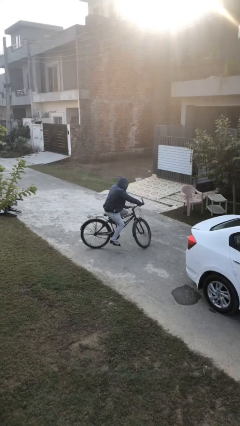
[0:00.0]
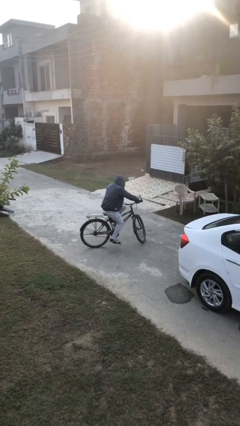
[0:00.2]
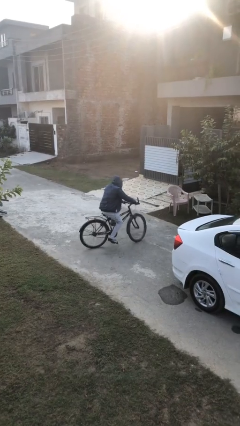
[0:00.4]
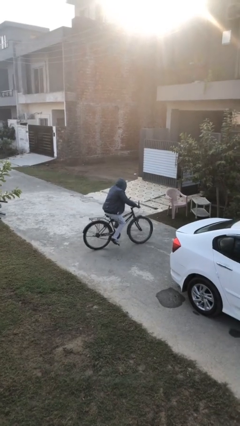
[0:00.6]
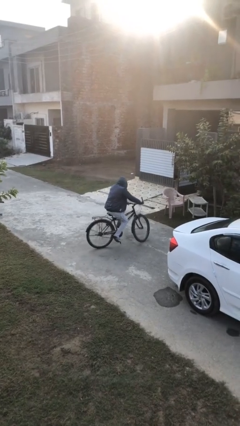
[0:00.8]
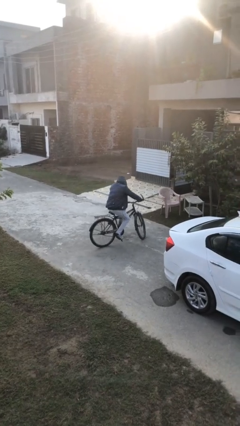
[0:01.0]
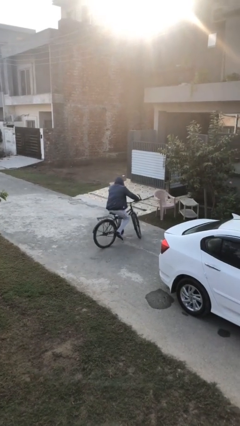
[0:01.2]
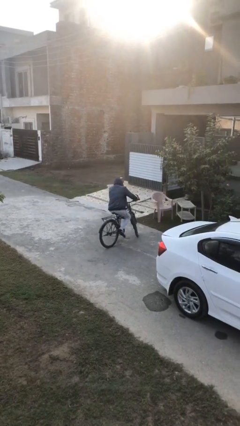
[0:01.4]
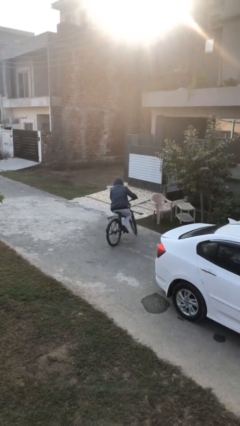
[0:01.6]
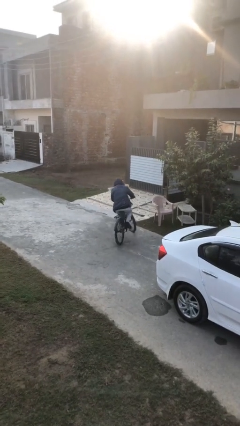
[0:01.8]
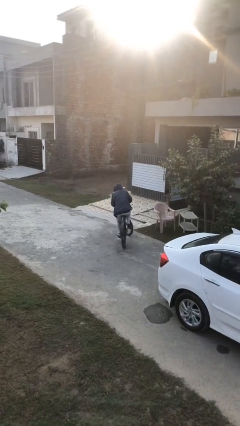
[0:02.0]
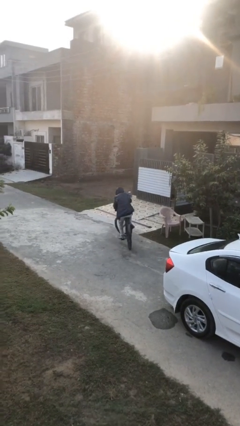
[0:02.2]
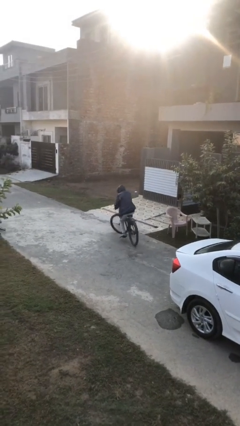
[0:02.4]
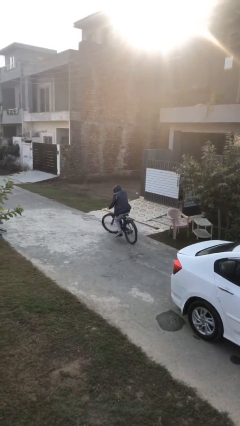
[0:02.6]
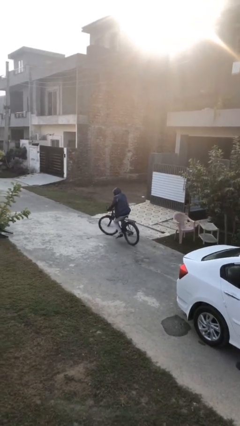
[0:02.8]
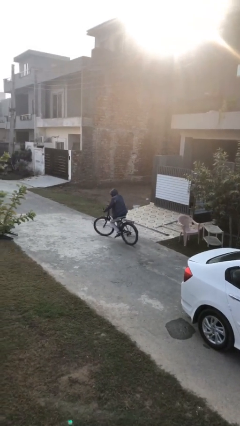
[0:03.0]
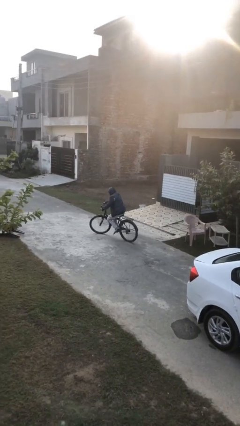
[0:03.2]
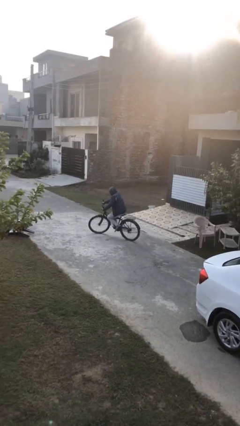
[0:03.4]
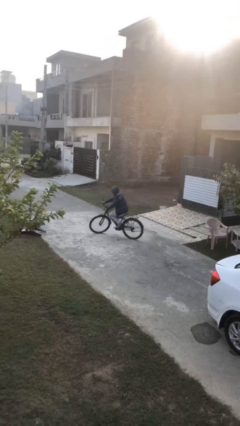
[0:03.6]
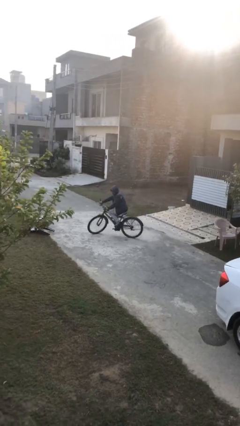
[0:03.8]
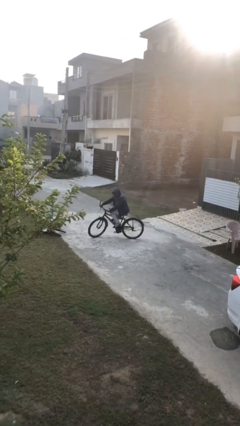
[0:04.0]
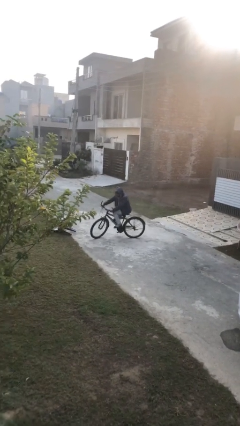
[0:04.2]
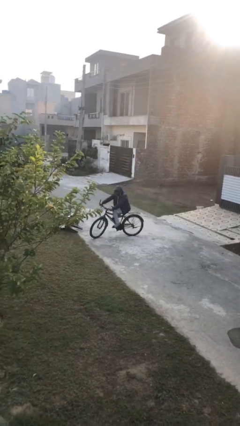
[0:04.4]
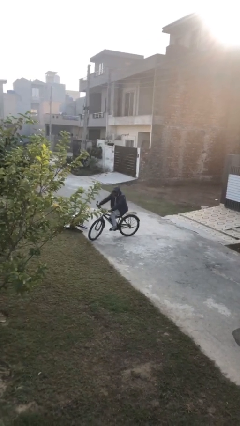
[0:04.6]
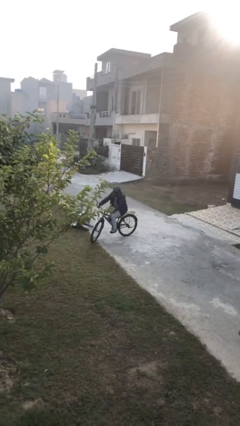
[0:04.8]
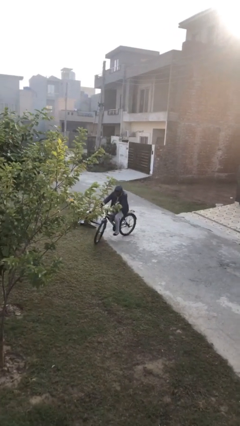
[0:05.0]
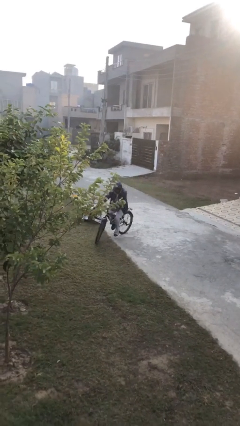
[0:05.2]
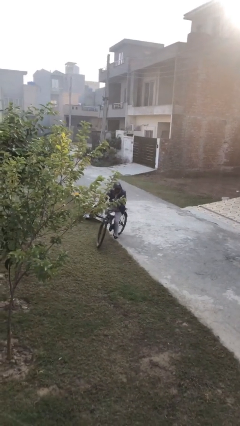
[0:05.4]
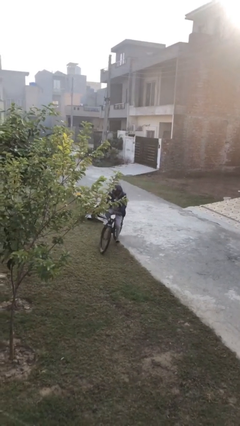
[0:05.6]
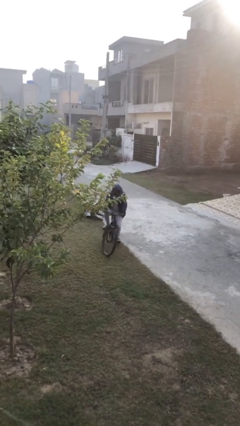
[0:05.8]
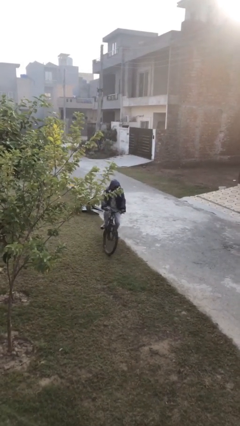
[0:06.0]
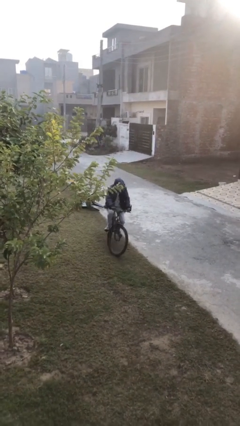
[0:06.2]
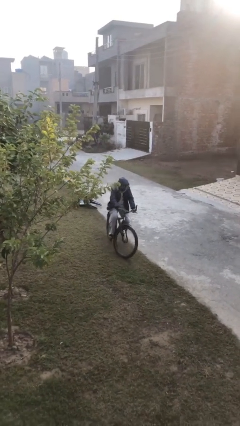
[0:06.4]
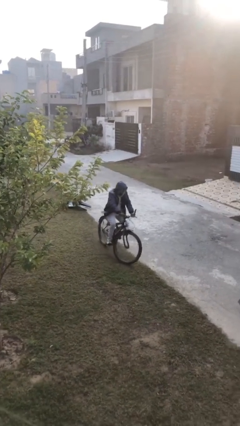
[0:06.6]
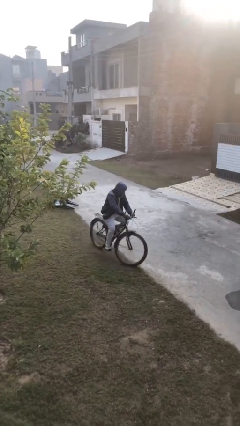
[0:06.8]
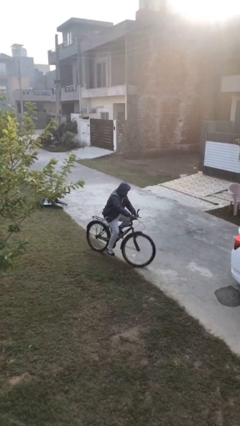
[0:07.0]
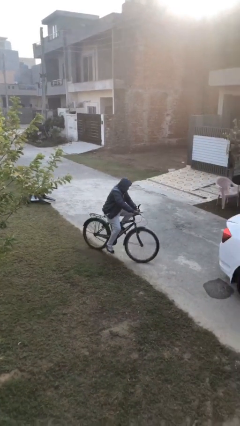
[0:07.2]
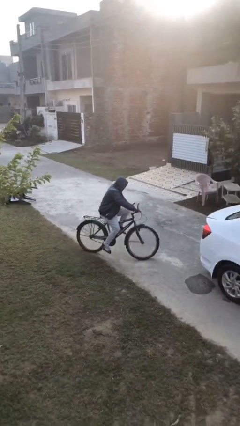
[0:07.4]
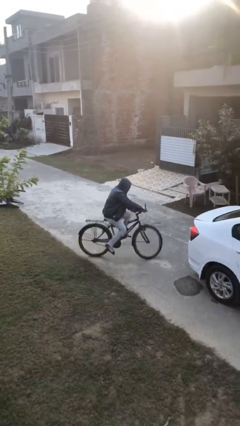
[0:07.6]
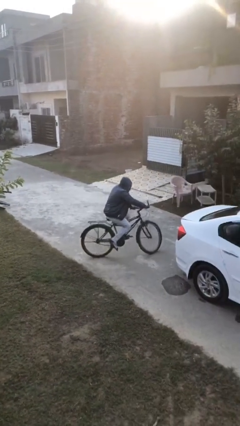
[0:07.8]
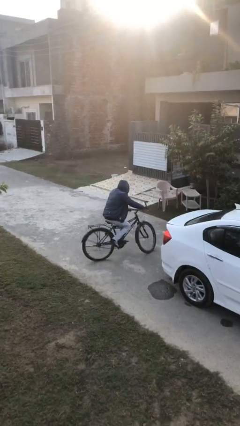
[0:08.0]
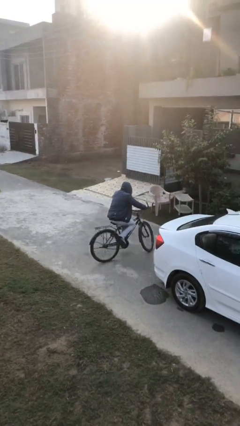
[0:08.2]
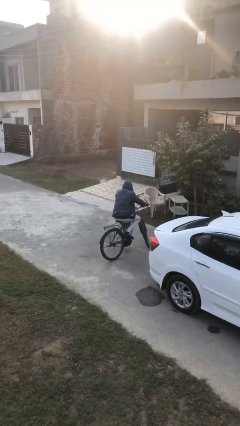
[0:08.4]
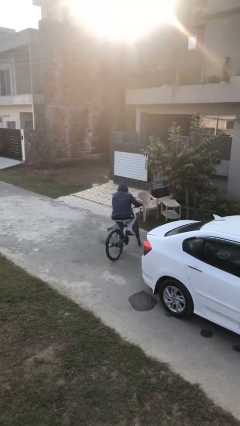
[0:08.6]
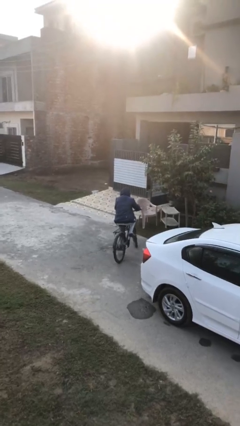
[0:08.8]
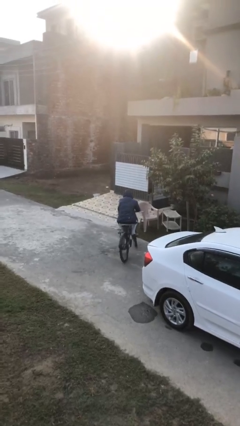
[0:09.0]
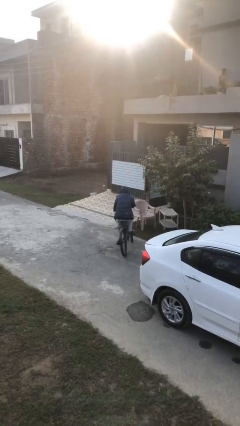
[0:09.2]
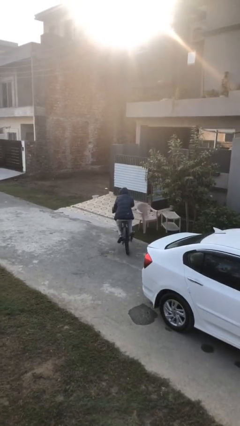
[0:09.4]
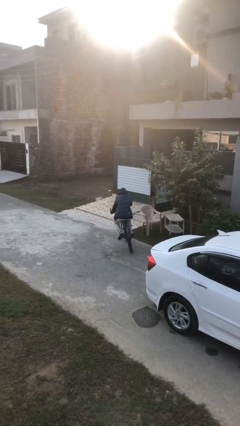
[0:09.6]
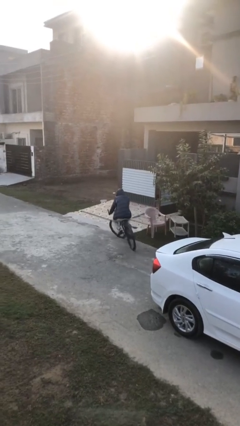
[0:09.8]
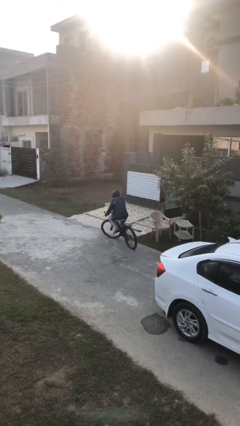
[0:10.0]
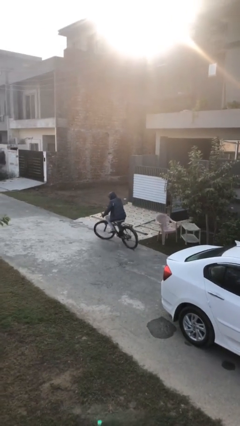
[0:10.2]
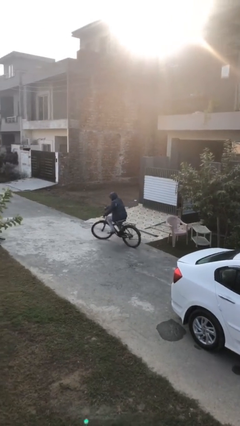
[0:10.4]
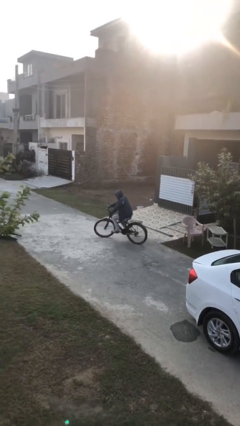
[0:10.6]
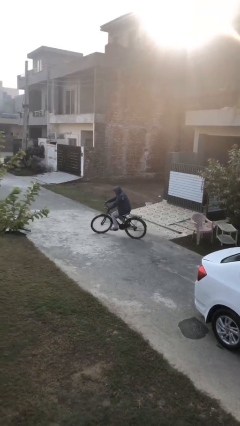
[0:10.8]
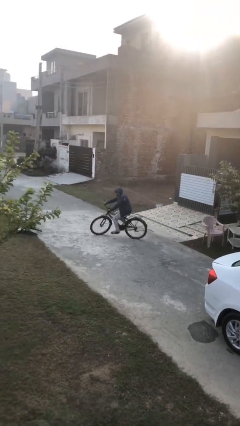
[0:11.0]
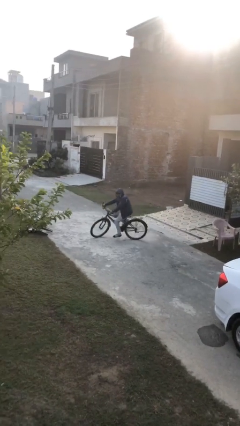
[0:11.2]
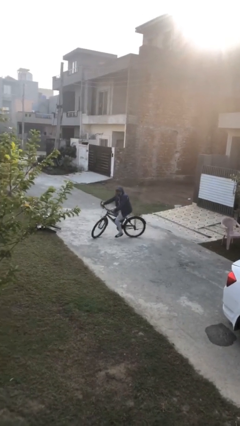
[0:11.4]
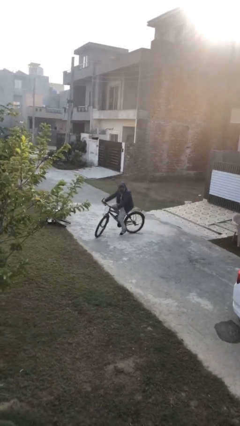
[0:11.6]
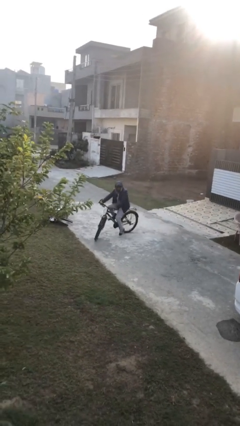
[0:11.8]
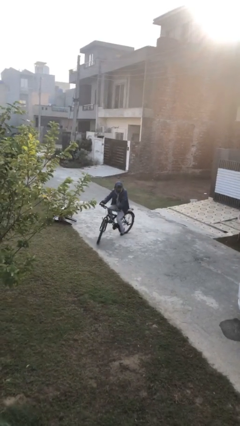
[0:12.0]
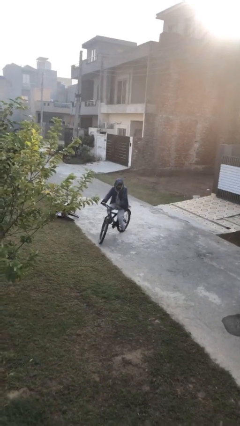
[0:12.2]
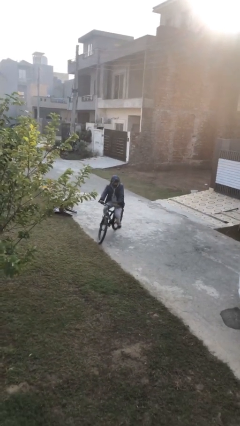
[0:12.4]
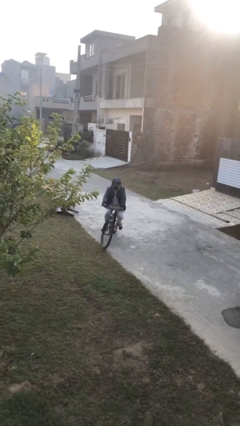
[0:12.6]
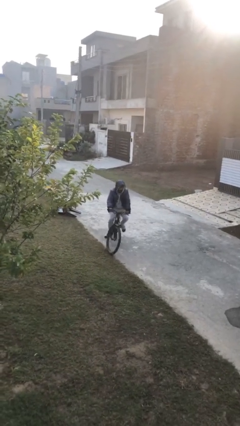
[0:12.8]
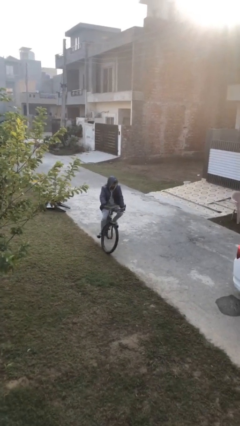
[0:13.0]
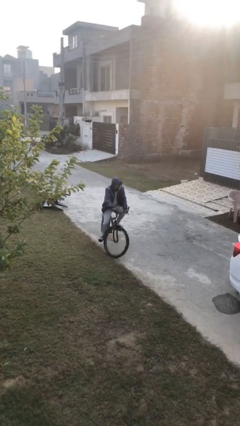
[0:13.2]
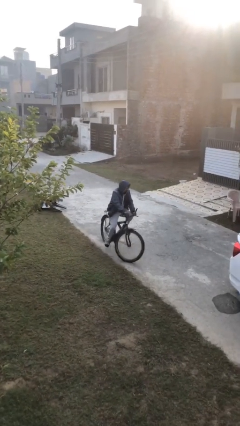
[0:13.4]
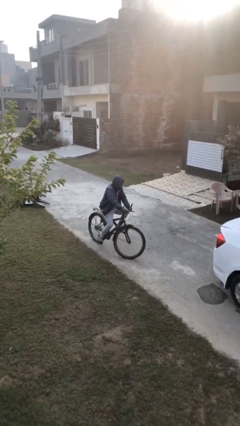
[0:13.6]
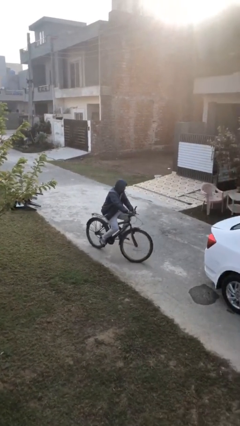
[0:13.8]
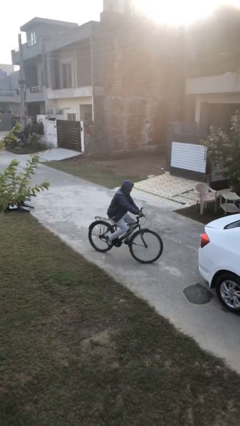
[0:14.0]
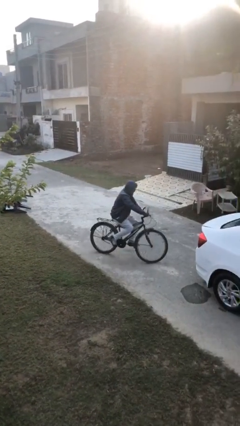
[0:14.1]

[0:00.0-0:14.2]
person rides bicycle

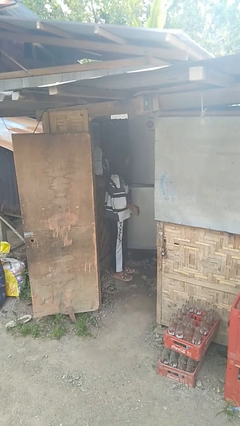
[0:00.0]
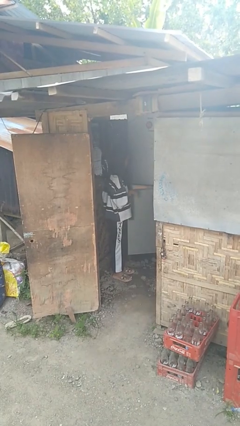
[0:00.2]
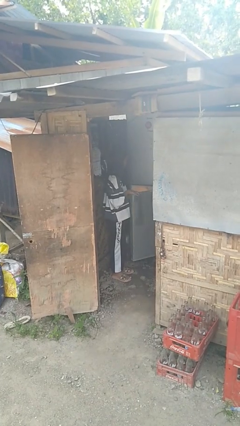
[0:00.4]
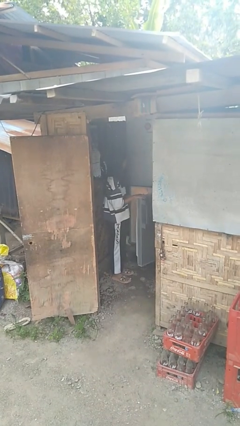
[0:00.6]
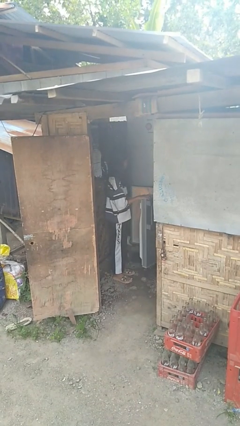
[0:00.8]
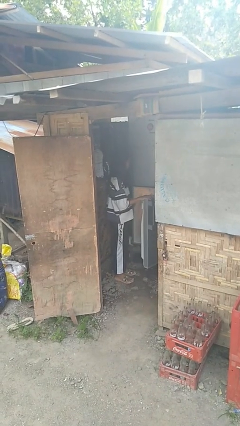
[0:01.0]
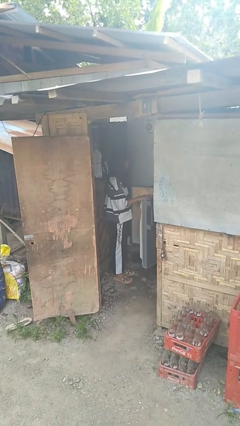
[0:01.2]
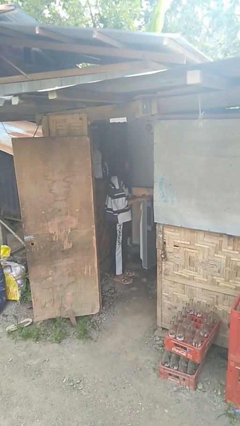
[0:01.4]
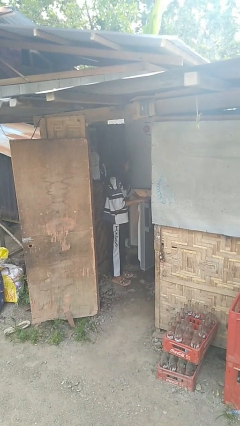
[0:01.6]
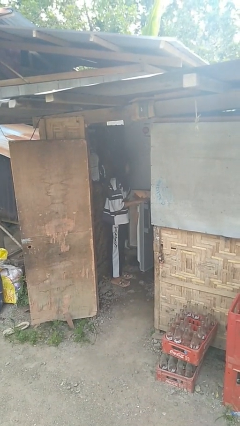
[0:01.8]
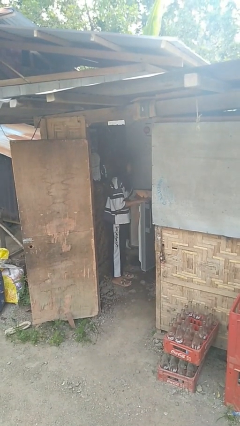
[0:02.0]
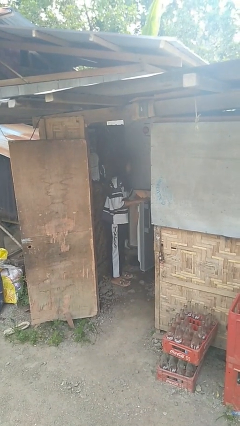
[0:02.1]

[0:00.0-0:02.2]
person opens refrigerator

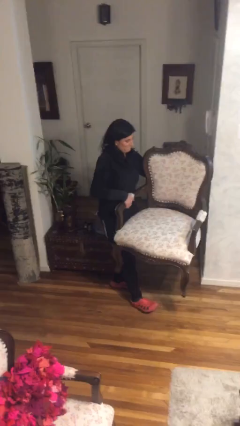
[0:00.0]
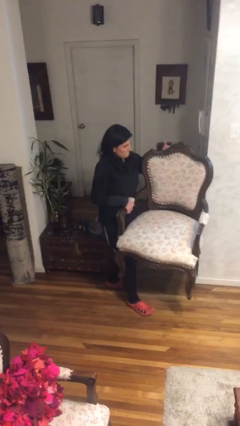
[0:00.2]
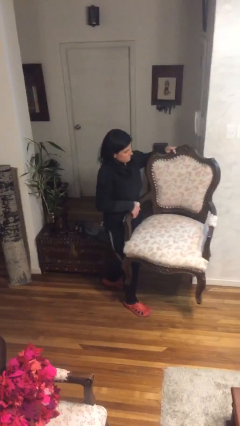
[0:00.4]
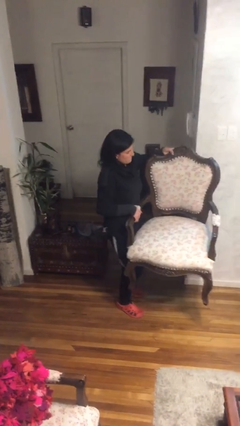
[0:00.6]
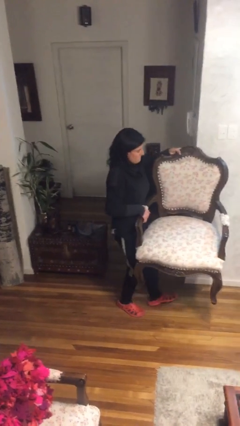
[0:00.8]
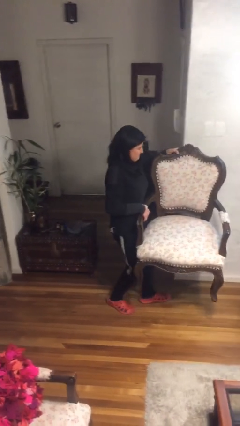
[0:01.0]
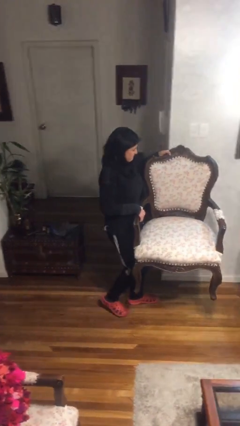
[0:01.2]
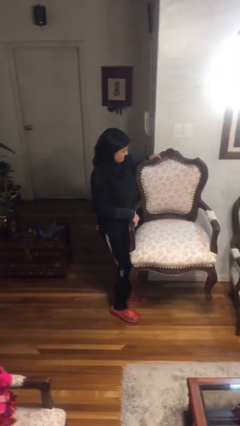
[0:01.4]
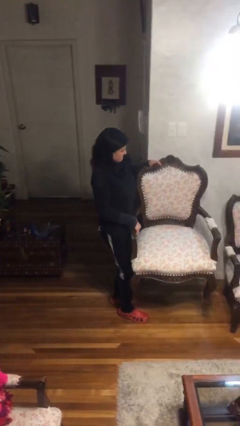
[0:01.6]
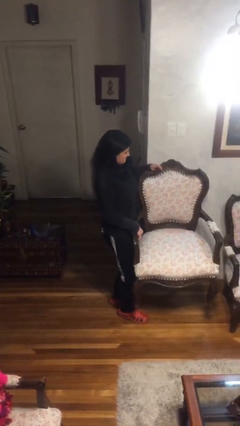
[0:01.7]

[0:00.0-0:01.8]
person carries heavy object
